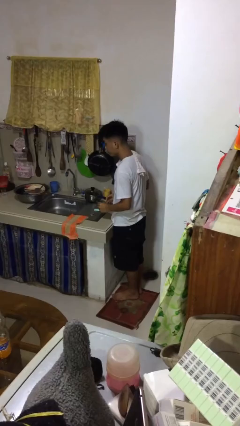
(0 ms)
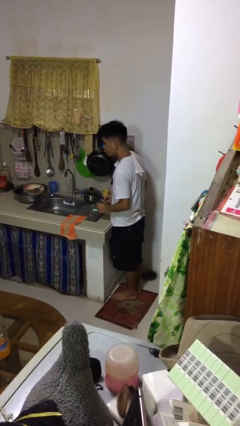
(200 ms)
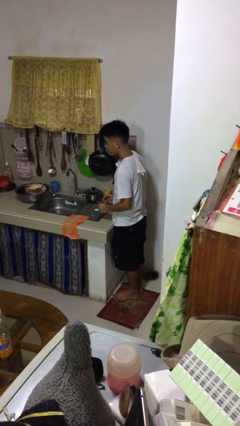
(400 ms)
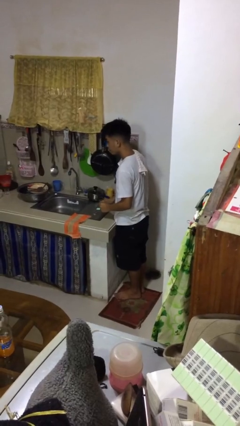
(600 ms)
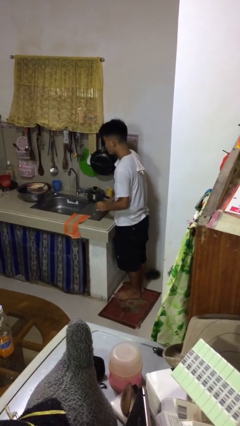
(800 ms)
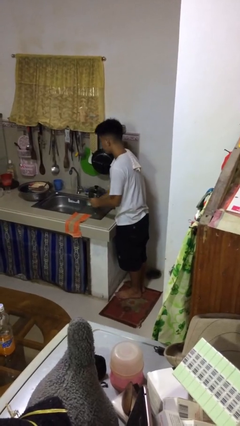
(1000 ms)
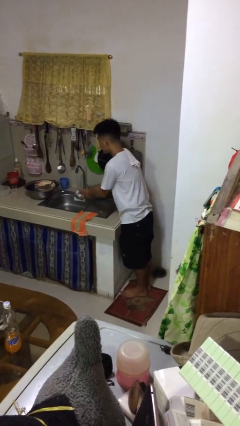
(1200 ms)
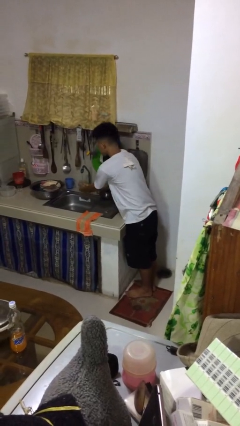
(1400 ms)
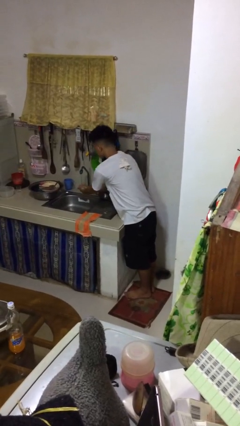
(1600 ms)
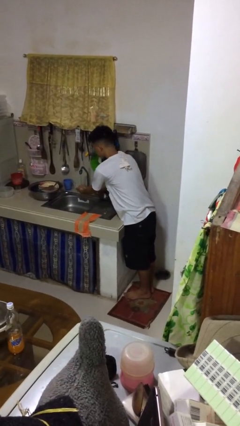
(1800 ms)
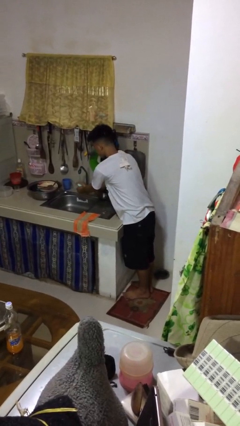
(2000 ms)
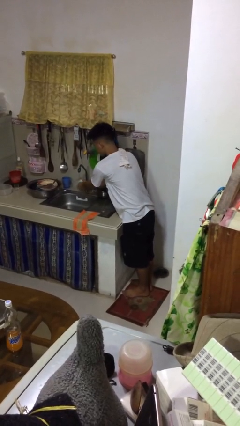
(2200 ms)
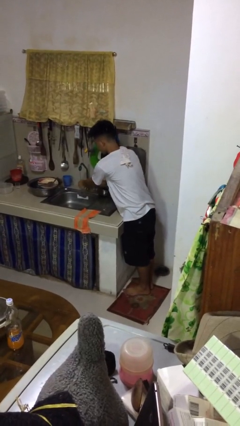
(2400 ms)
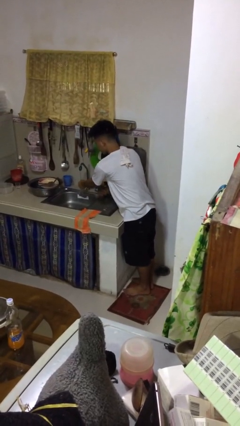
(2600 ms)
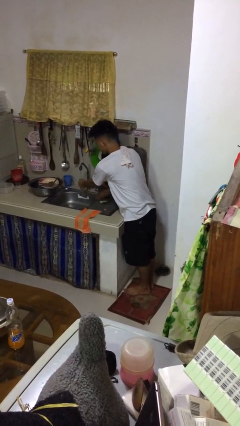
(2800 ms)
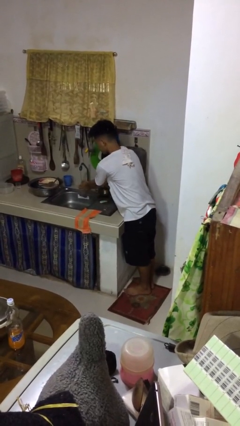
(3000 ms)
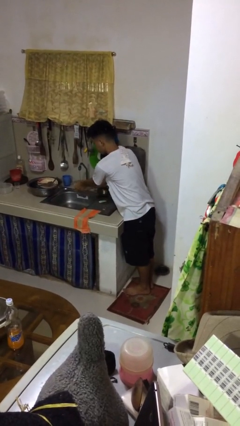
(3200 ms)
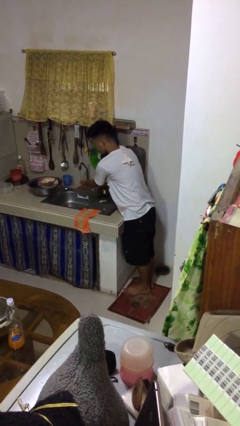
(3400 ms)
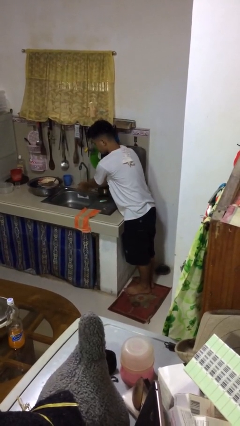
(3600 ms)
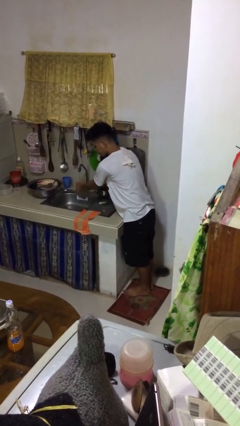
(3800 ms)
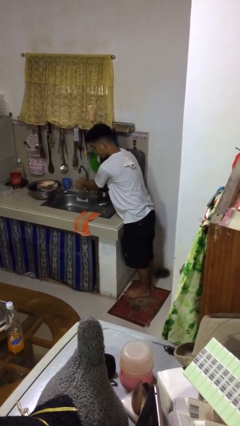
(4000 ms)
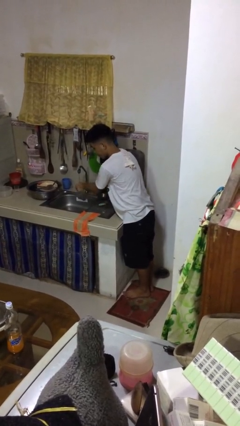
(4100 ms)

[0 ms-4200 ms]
person washes hands

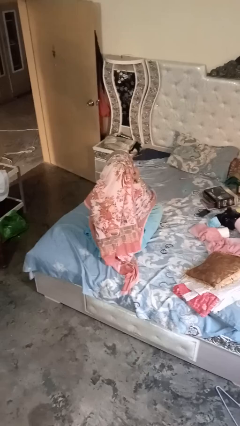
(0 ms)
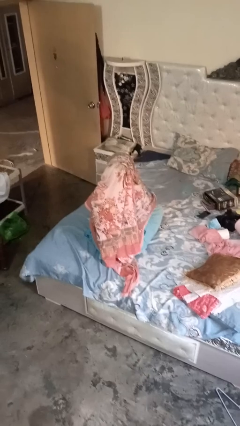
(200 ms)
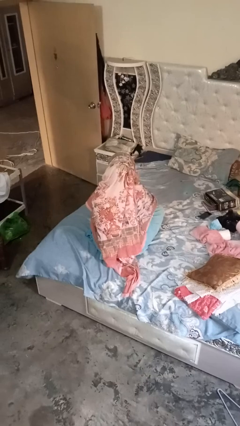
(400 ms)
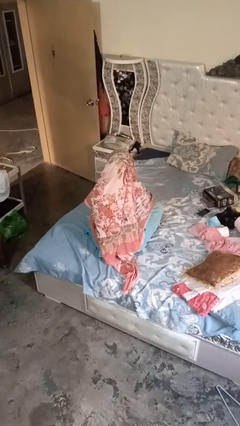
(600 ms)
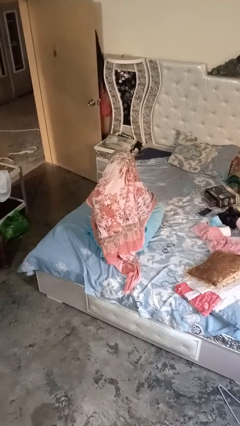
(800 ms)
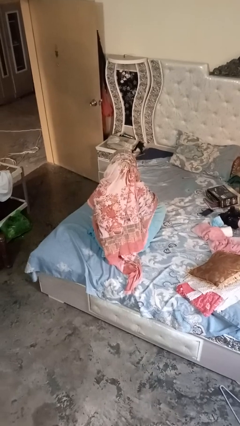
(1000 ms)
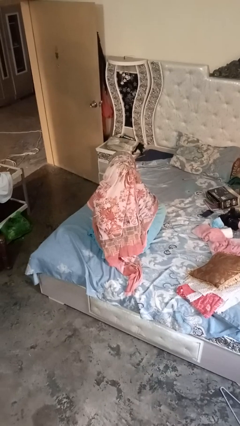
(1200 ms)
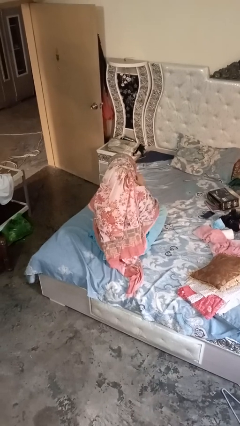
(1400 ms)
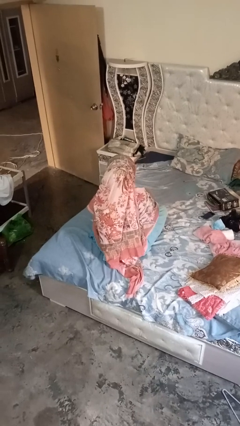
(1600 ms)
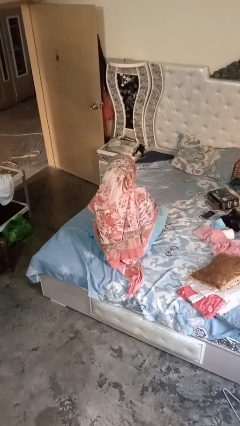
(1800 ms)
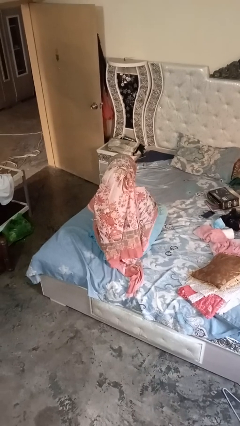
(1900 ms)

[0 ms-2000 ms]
person gestures listen closely

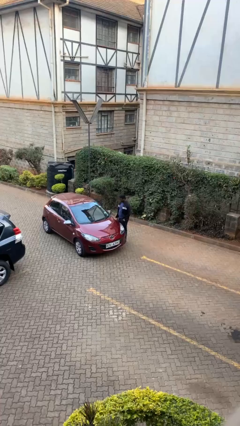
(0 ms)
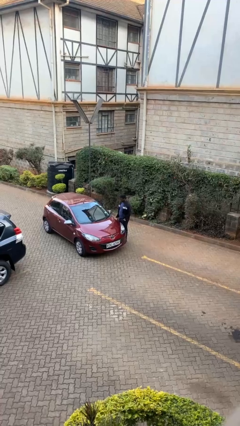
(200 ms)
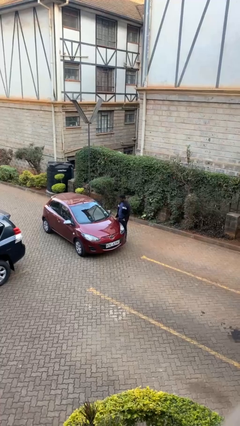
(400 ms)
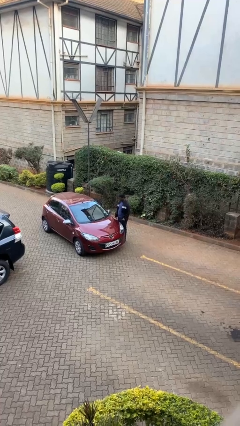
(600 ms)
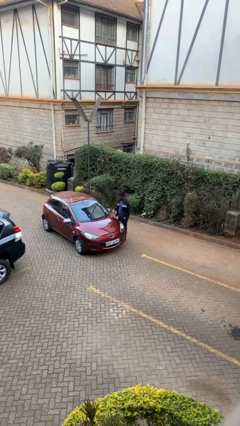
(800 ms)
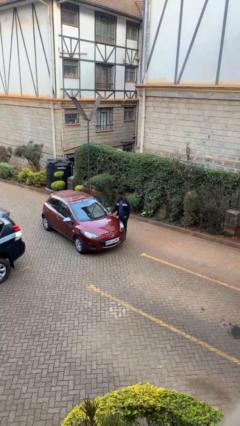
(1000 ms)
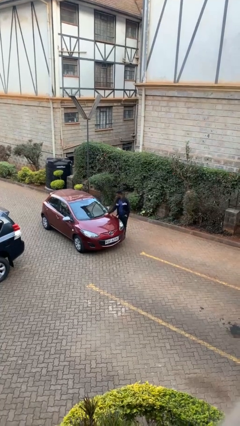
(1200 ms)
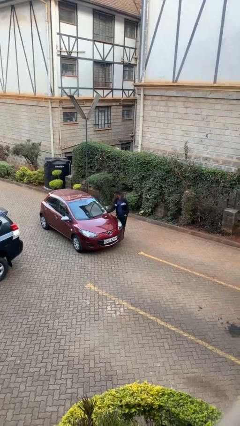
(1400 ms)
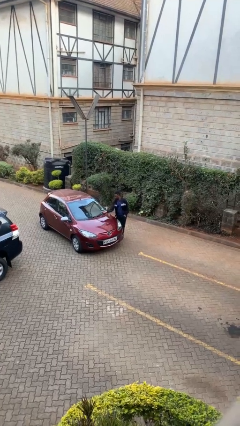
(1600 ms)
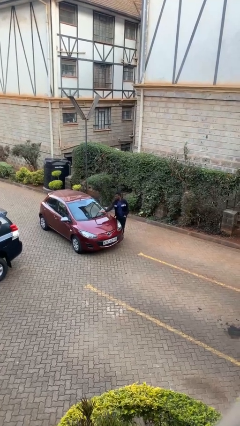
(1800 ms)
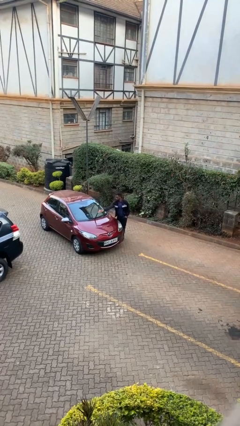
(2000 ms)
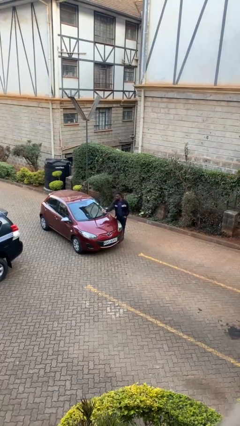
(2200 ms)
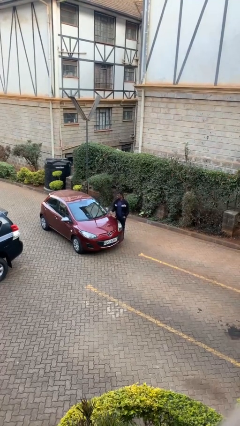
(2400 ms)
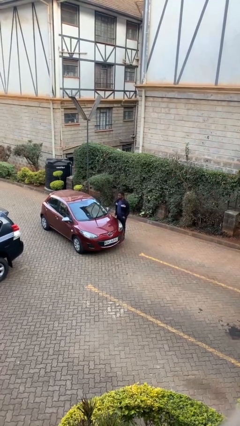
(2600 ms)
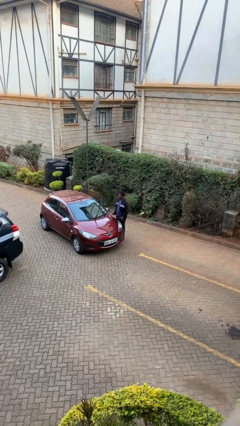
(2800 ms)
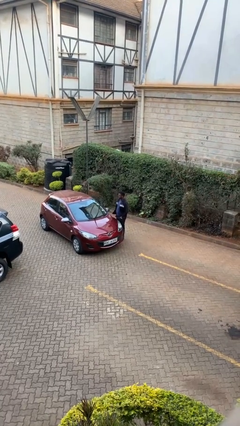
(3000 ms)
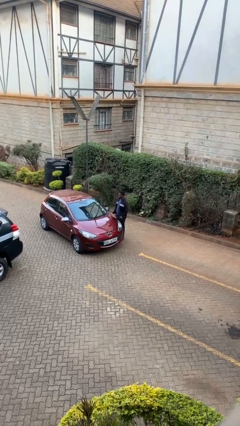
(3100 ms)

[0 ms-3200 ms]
person flips up car wipers

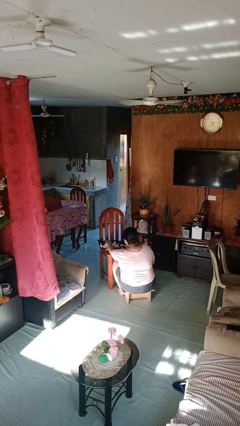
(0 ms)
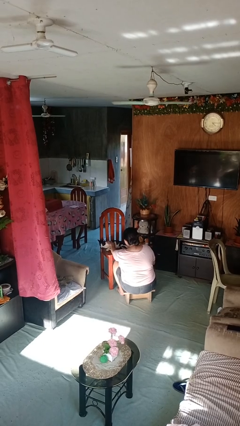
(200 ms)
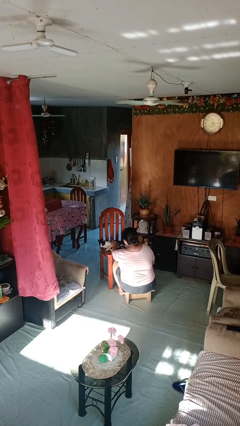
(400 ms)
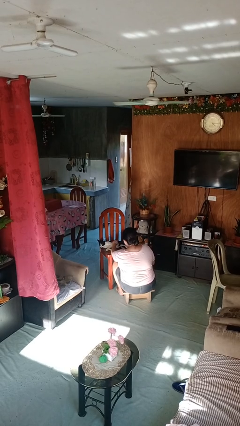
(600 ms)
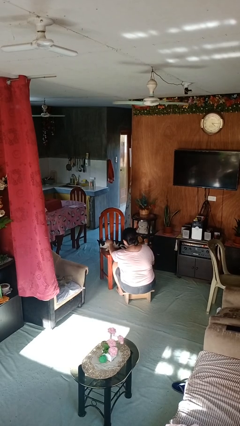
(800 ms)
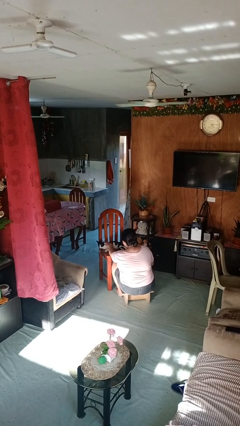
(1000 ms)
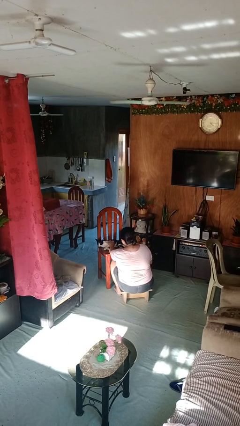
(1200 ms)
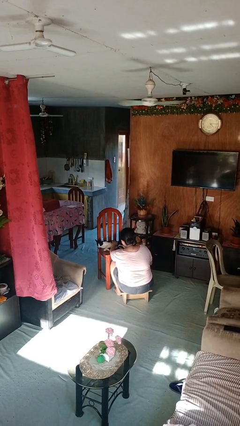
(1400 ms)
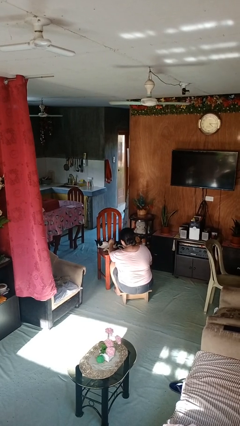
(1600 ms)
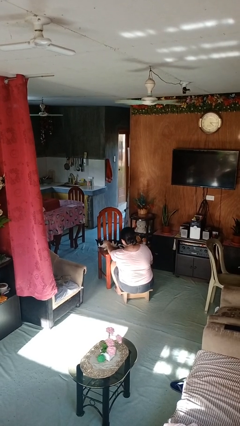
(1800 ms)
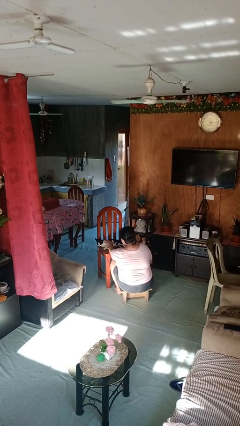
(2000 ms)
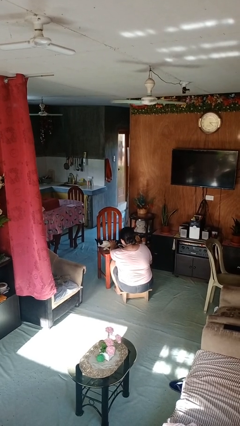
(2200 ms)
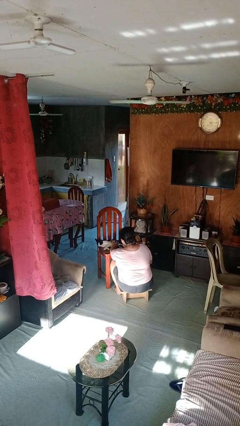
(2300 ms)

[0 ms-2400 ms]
person pets cat

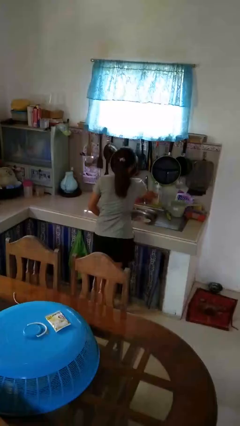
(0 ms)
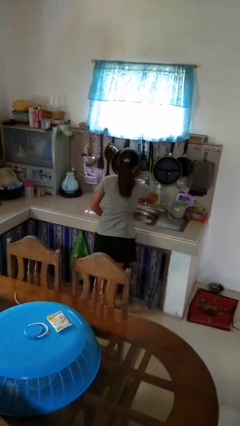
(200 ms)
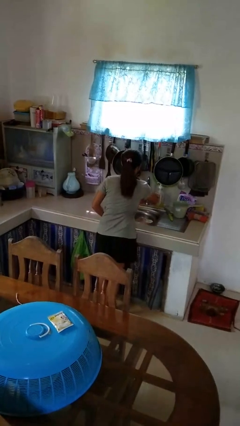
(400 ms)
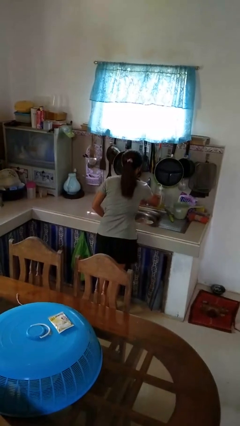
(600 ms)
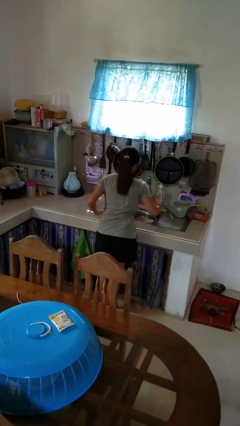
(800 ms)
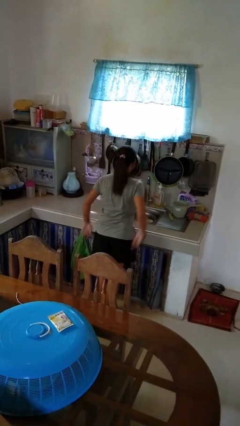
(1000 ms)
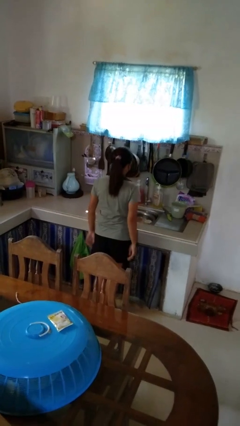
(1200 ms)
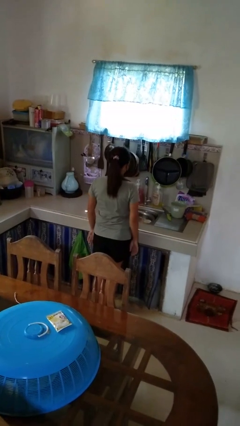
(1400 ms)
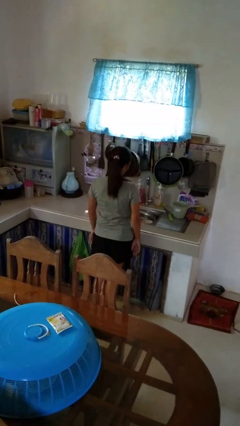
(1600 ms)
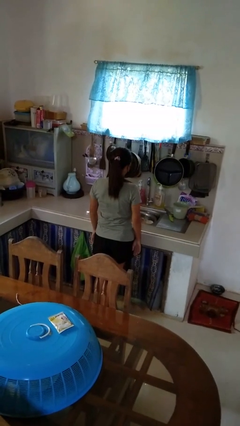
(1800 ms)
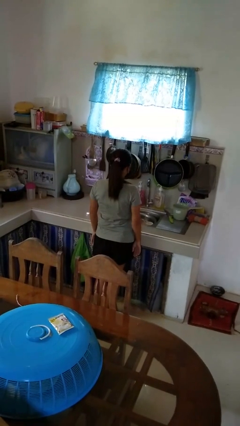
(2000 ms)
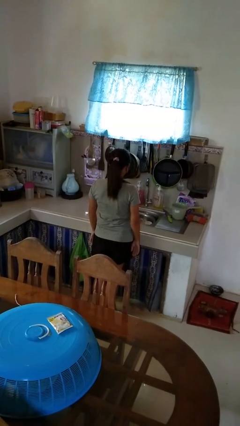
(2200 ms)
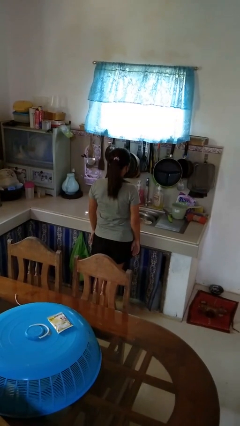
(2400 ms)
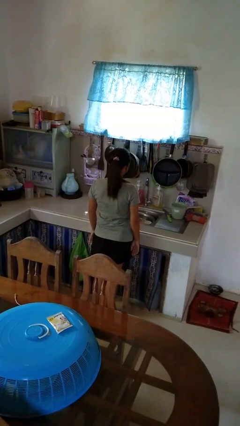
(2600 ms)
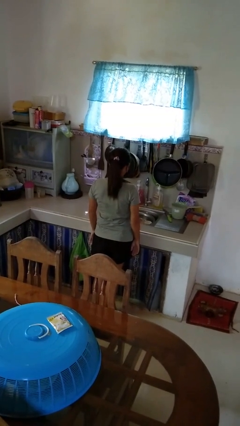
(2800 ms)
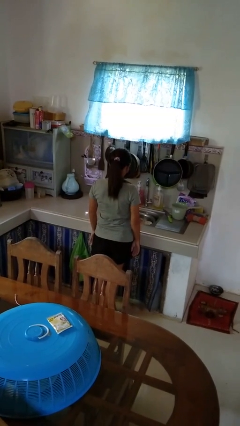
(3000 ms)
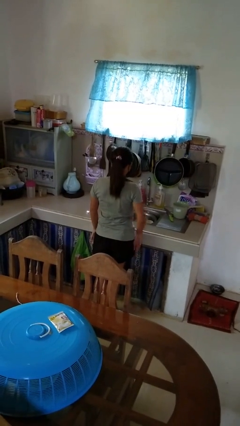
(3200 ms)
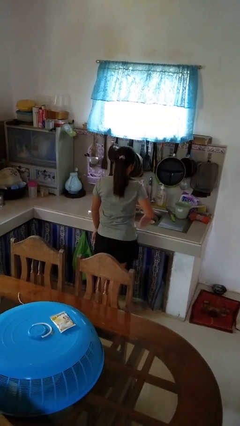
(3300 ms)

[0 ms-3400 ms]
person turns on faucet

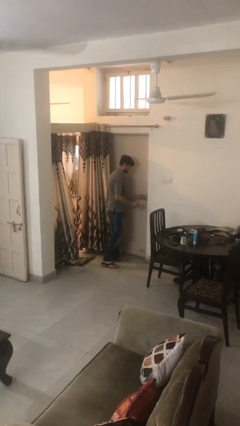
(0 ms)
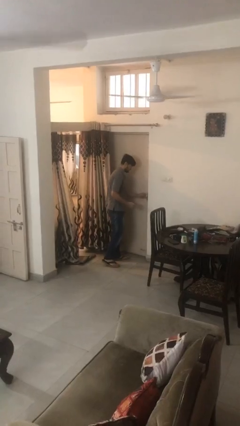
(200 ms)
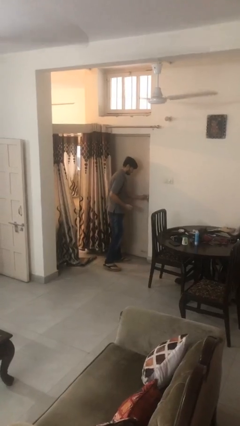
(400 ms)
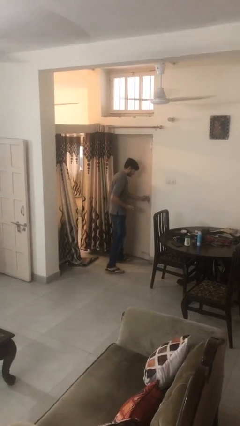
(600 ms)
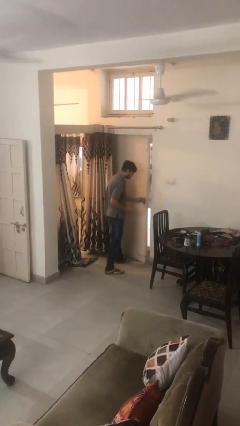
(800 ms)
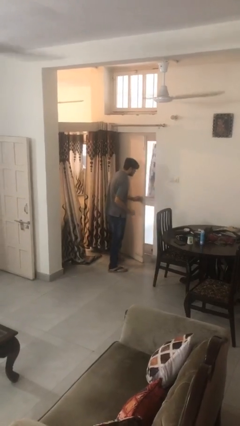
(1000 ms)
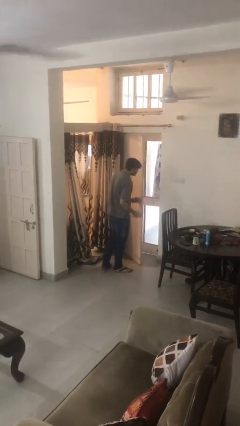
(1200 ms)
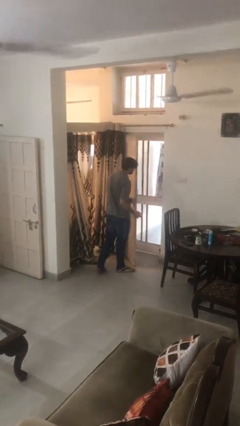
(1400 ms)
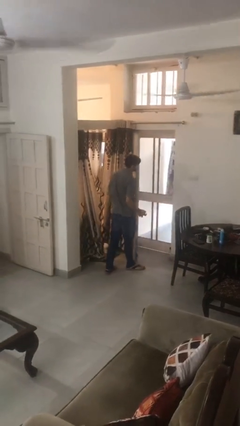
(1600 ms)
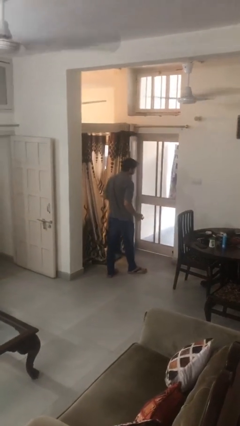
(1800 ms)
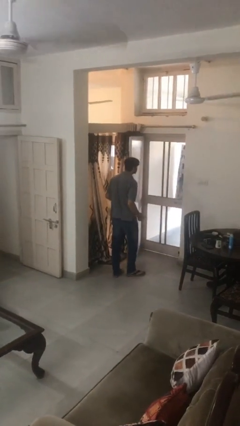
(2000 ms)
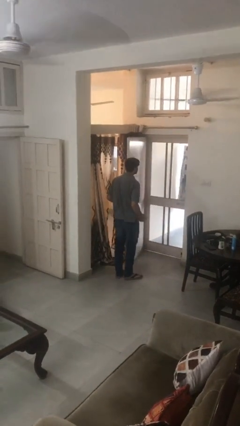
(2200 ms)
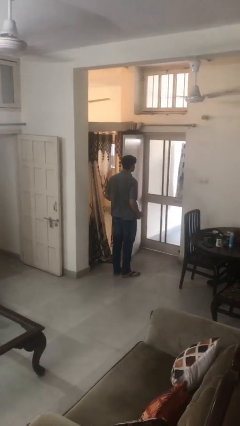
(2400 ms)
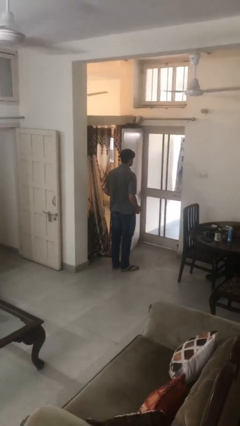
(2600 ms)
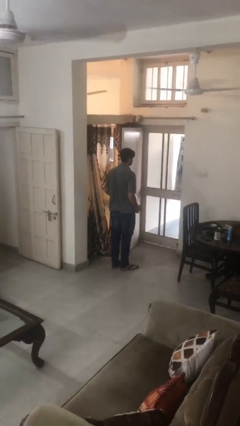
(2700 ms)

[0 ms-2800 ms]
person opens facility door
